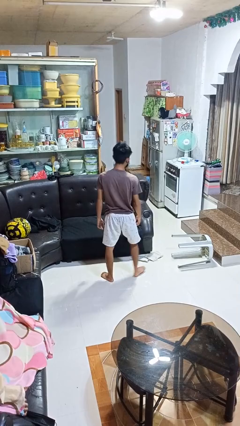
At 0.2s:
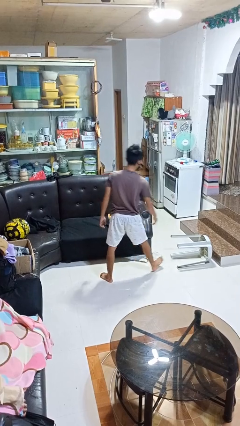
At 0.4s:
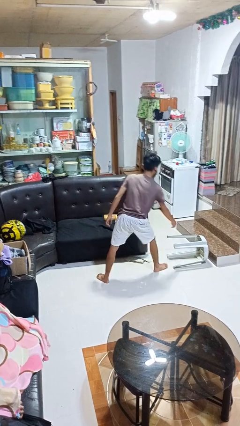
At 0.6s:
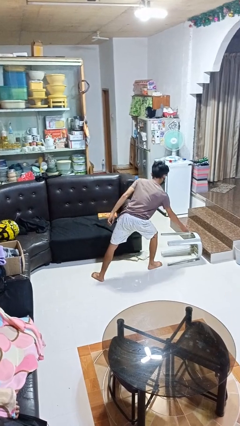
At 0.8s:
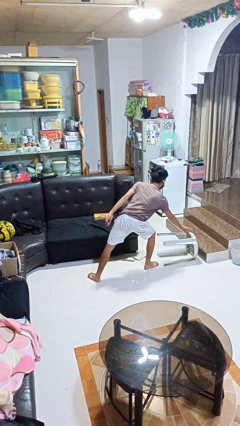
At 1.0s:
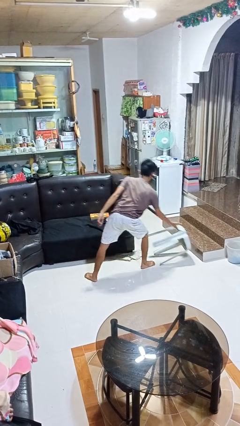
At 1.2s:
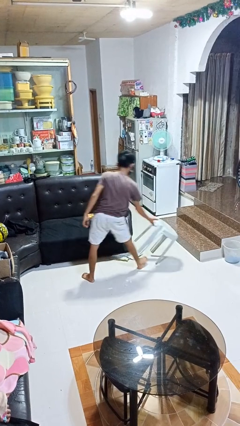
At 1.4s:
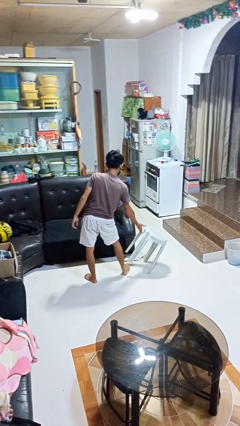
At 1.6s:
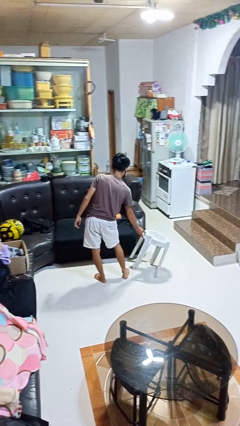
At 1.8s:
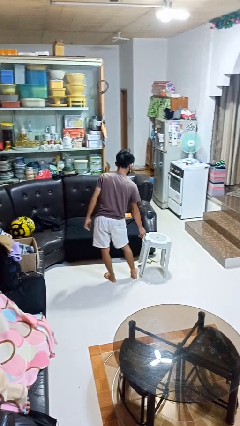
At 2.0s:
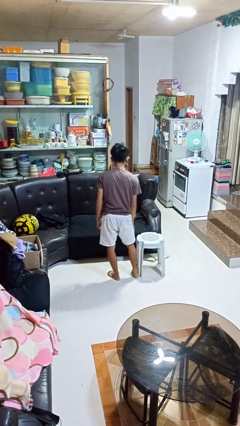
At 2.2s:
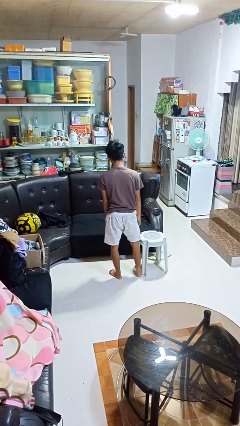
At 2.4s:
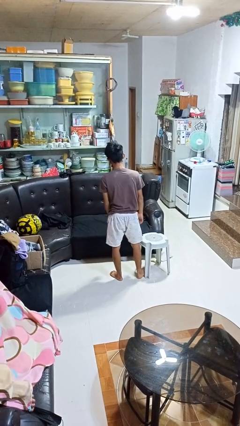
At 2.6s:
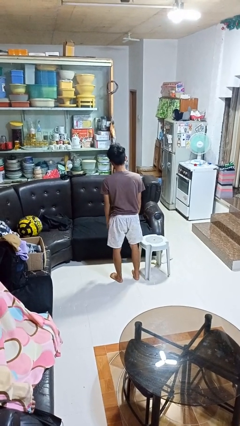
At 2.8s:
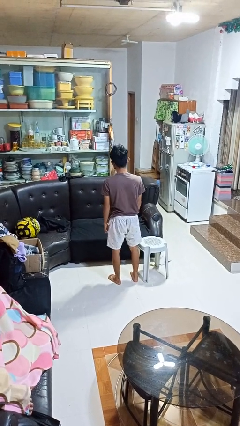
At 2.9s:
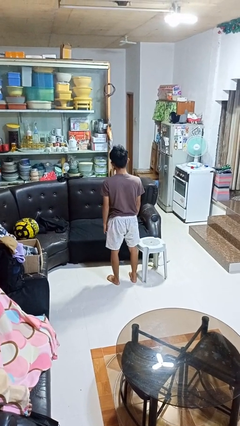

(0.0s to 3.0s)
person sets upright furniture

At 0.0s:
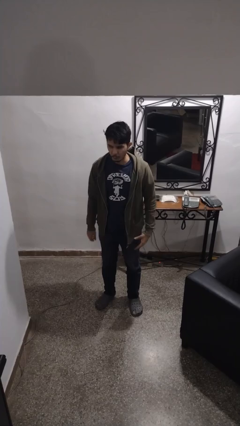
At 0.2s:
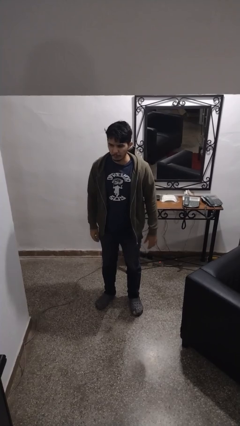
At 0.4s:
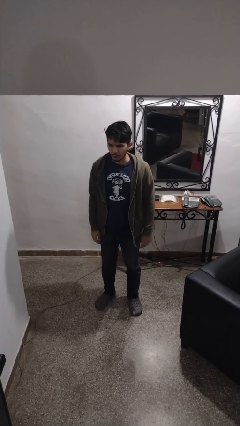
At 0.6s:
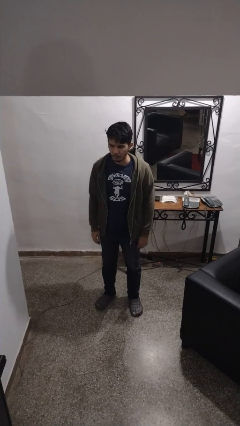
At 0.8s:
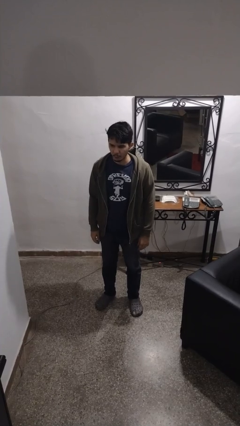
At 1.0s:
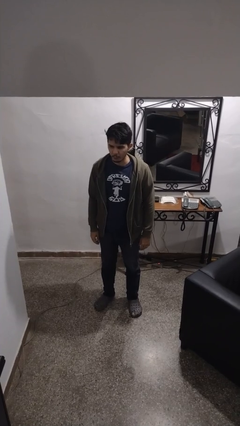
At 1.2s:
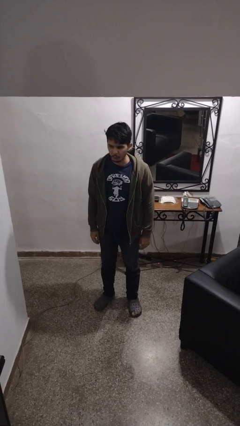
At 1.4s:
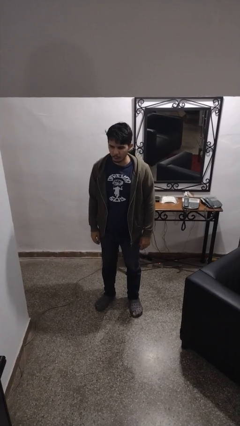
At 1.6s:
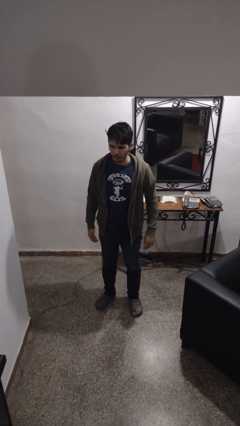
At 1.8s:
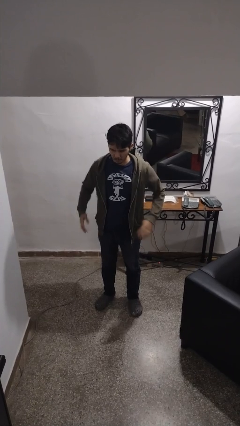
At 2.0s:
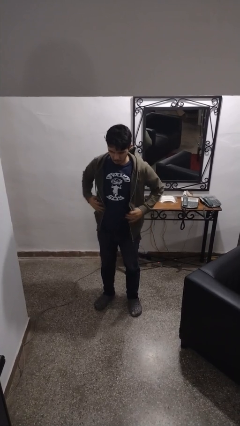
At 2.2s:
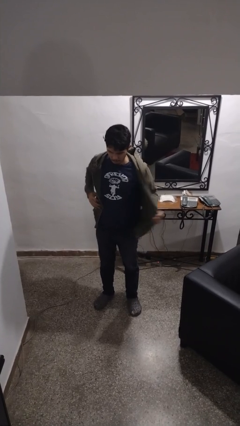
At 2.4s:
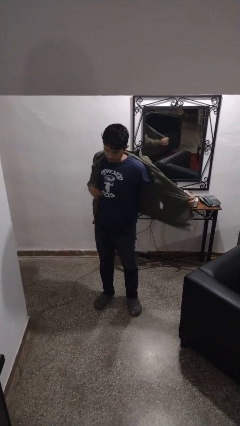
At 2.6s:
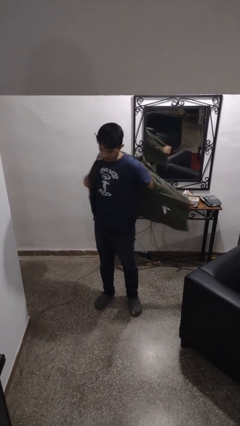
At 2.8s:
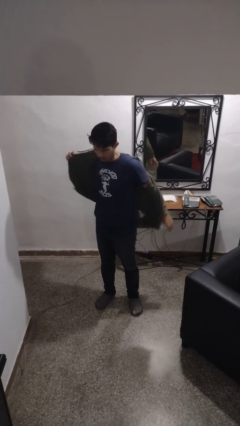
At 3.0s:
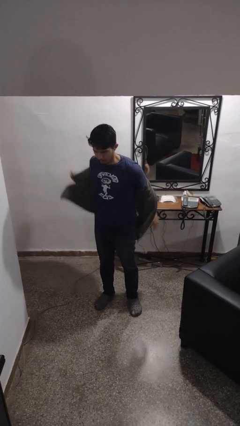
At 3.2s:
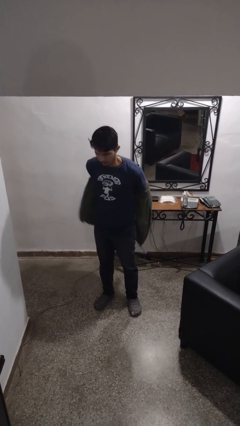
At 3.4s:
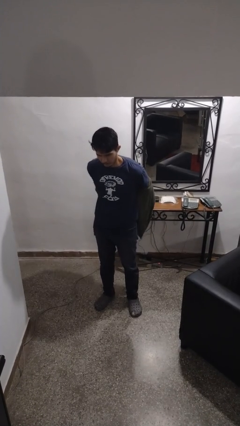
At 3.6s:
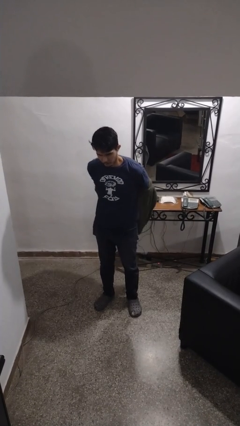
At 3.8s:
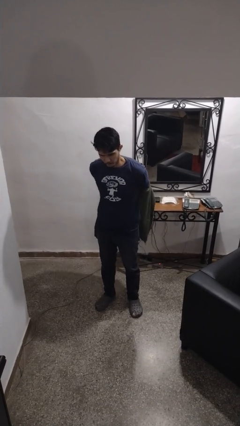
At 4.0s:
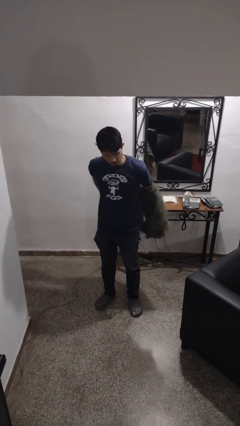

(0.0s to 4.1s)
person takes off jacket

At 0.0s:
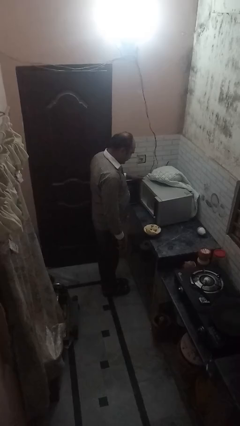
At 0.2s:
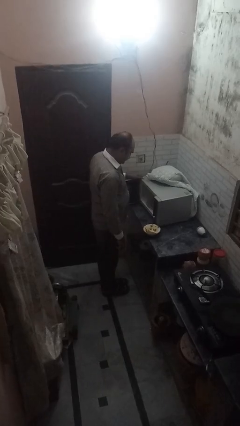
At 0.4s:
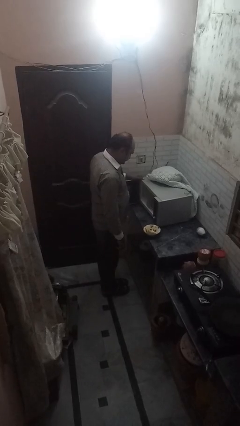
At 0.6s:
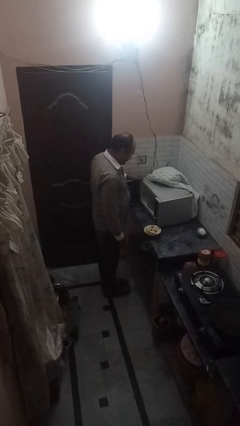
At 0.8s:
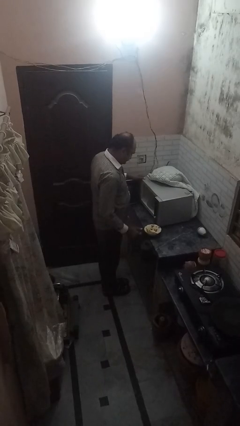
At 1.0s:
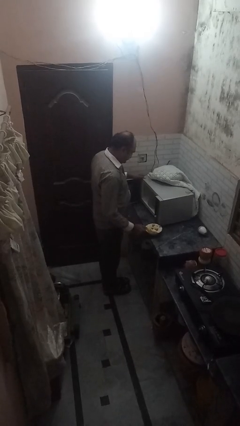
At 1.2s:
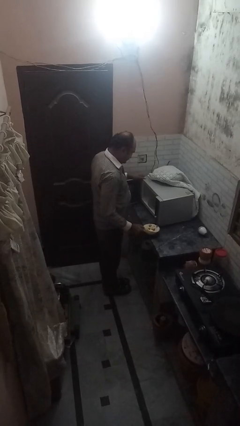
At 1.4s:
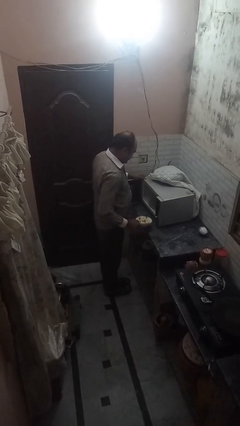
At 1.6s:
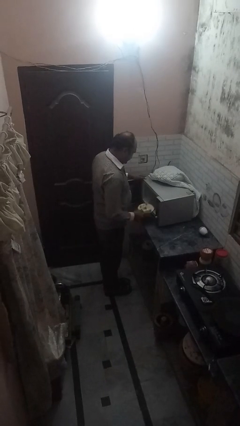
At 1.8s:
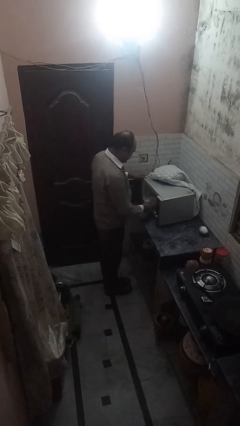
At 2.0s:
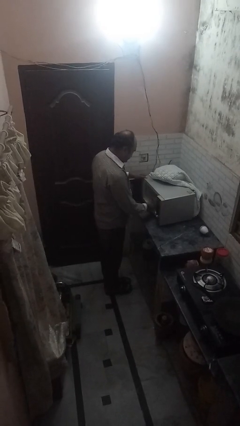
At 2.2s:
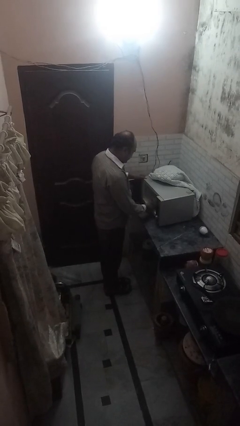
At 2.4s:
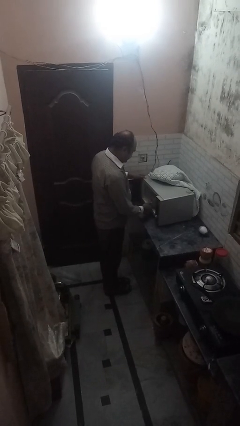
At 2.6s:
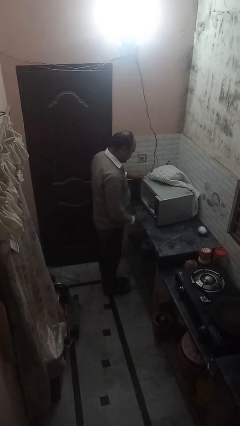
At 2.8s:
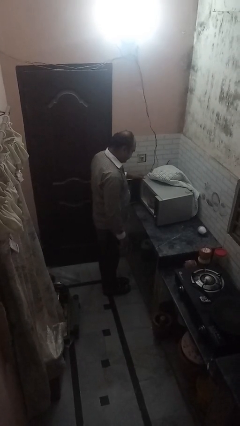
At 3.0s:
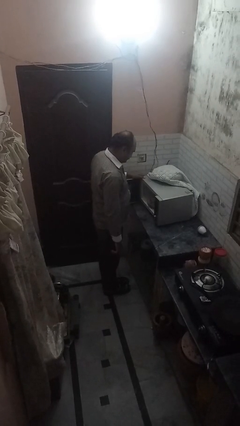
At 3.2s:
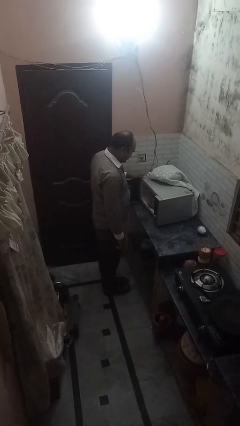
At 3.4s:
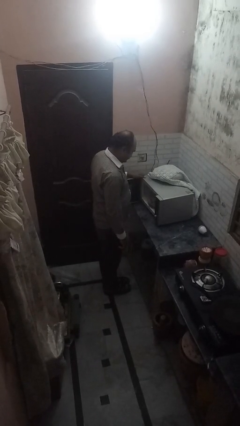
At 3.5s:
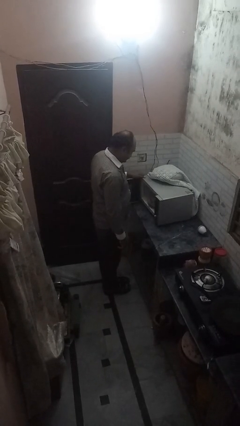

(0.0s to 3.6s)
person puts object into microwave

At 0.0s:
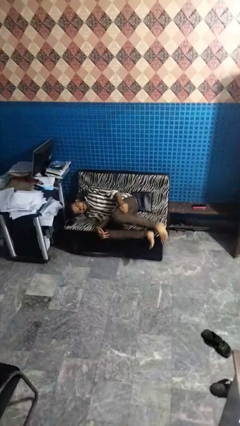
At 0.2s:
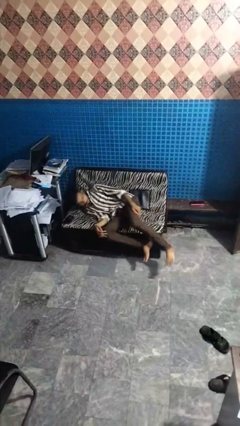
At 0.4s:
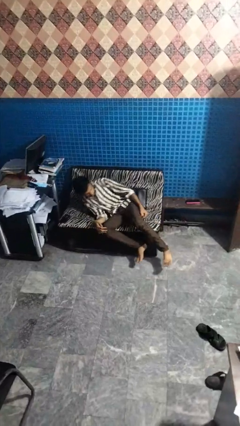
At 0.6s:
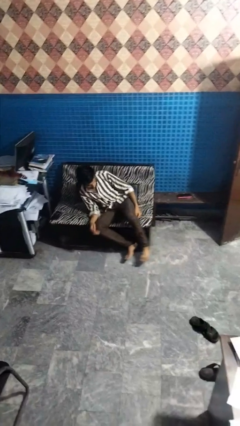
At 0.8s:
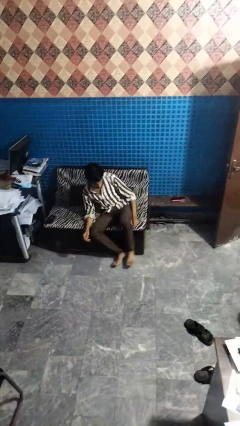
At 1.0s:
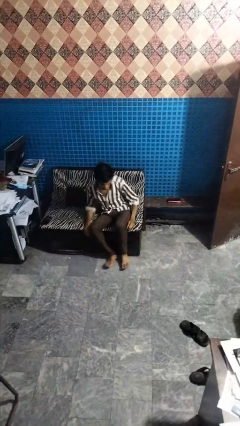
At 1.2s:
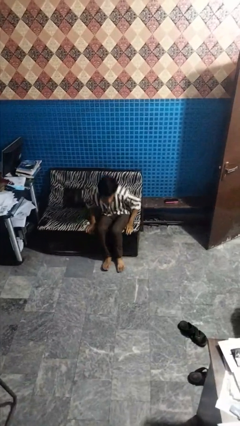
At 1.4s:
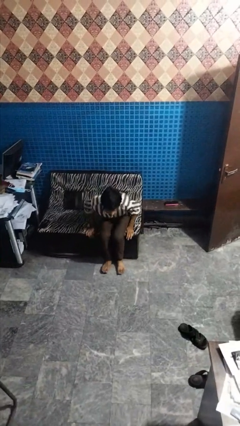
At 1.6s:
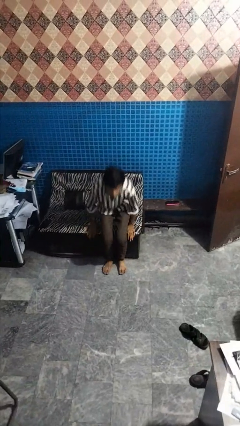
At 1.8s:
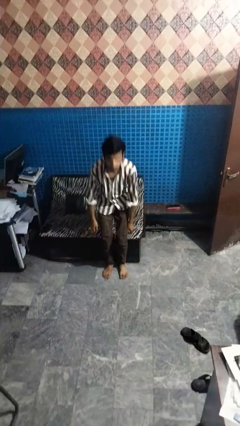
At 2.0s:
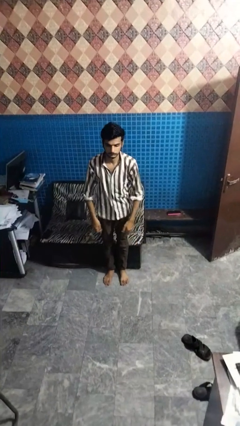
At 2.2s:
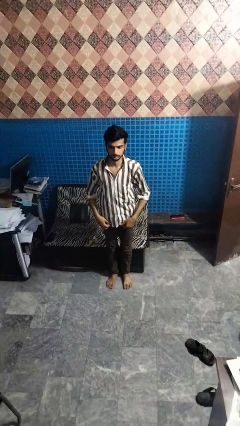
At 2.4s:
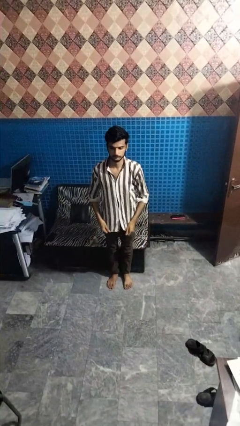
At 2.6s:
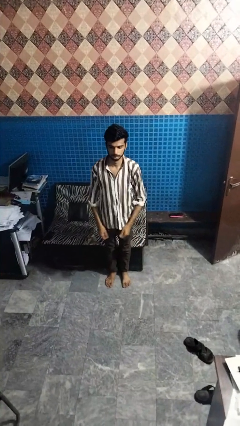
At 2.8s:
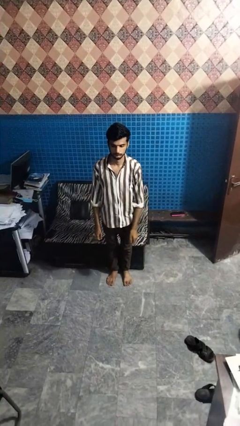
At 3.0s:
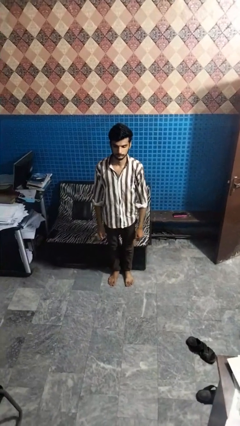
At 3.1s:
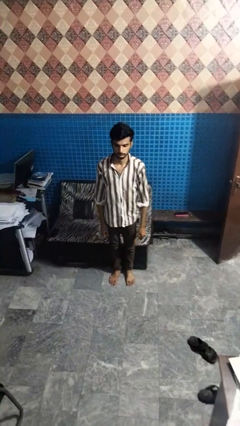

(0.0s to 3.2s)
person stands up

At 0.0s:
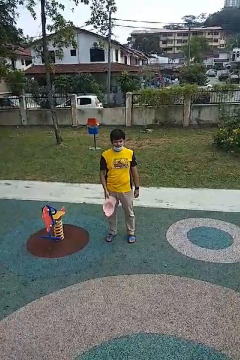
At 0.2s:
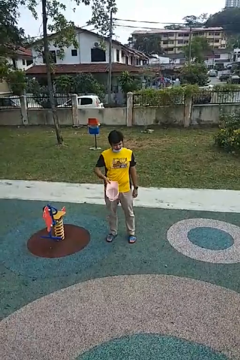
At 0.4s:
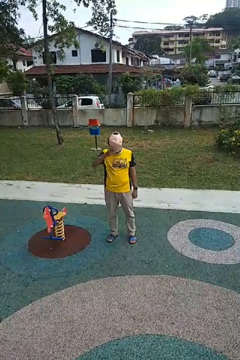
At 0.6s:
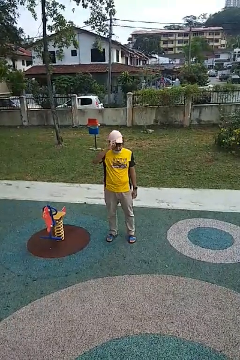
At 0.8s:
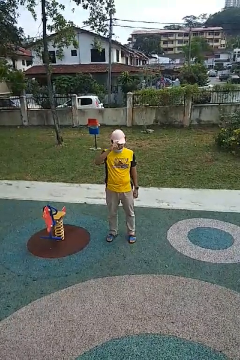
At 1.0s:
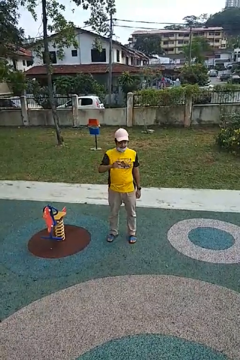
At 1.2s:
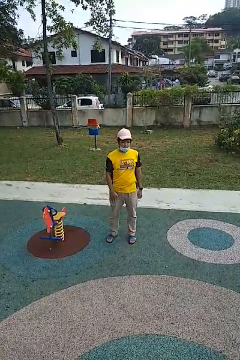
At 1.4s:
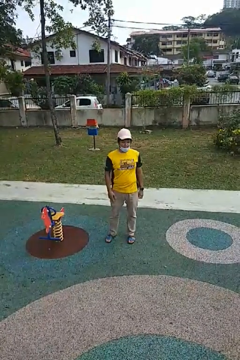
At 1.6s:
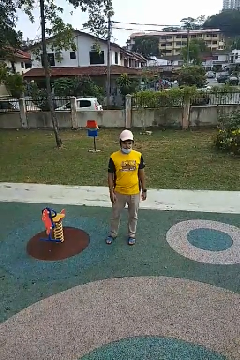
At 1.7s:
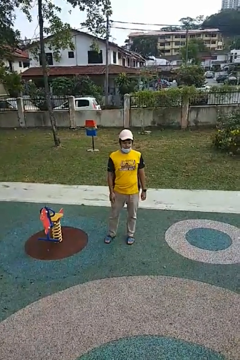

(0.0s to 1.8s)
person puts on hat

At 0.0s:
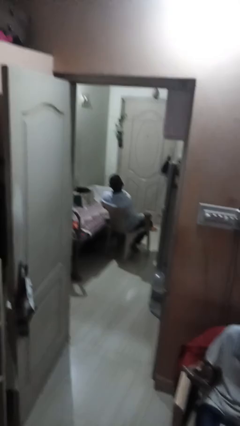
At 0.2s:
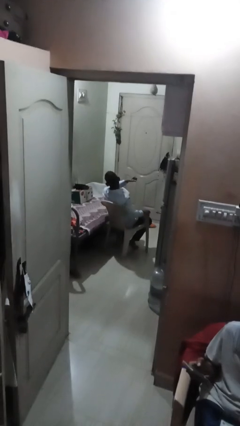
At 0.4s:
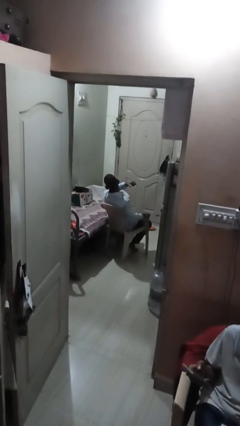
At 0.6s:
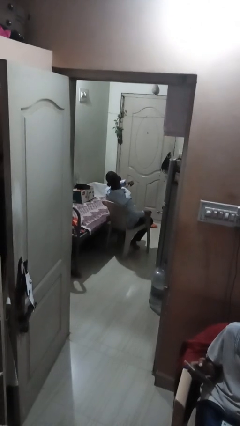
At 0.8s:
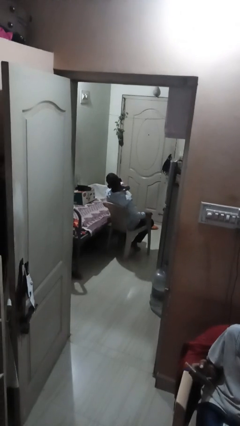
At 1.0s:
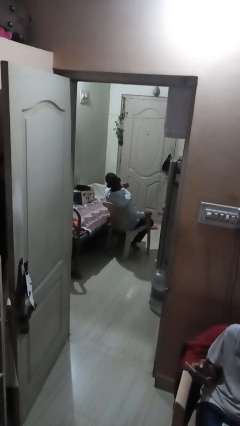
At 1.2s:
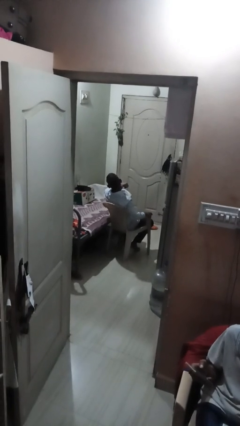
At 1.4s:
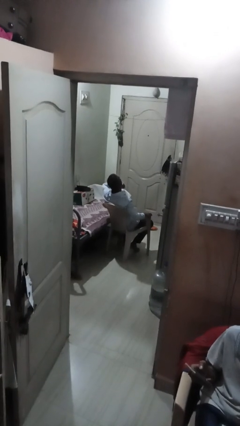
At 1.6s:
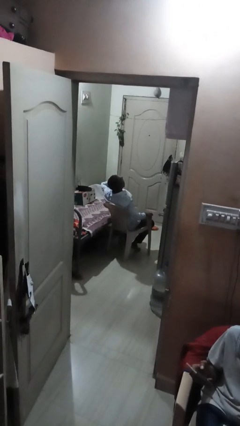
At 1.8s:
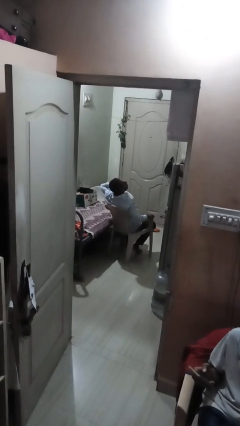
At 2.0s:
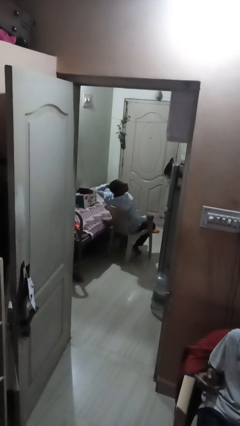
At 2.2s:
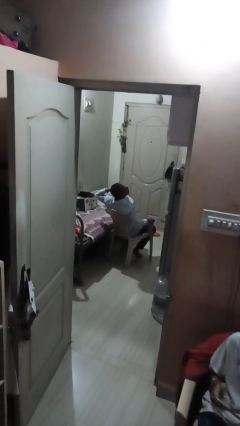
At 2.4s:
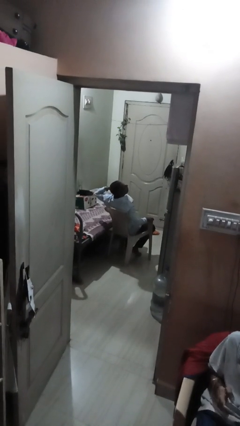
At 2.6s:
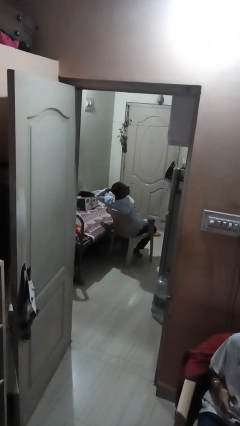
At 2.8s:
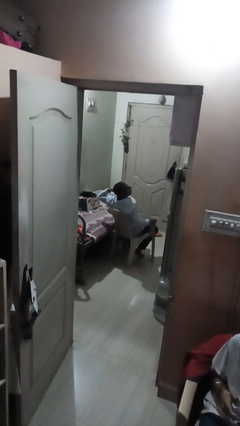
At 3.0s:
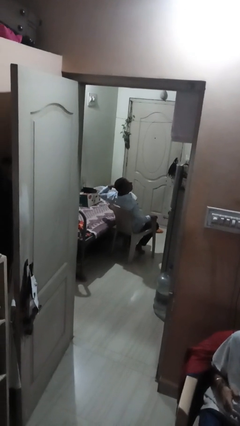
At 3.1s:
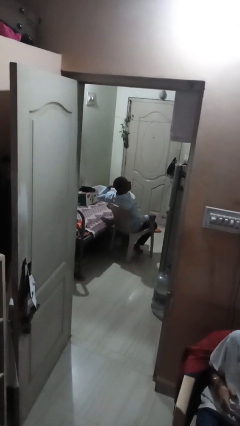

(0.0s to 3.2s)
person gestures cut
